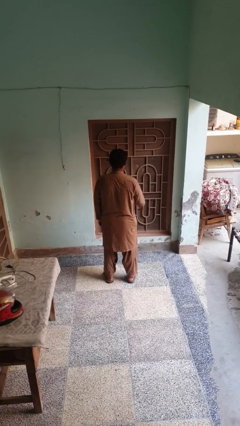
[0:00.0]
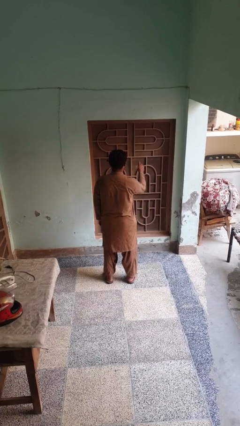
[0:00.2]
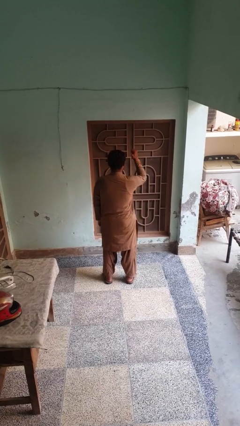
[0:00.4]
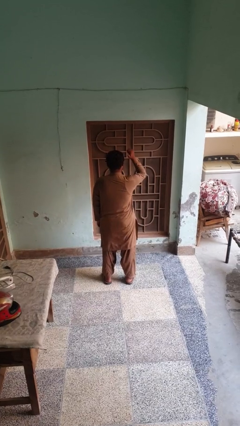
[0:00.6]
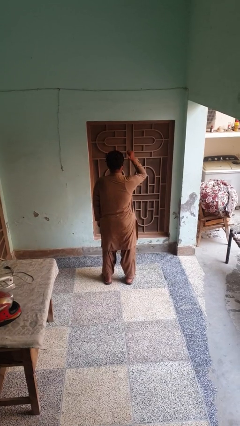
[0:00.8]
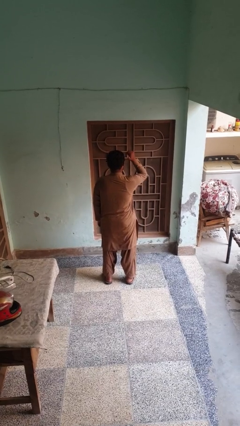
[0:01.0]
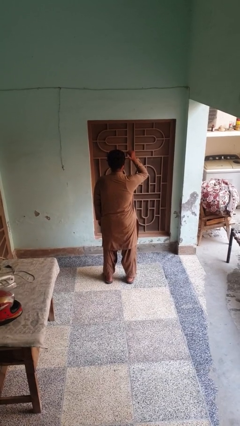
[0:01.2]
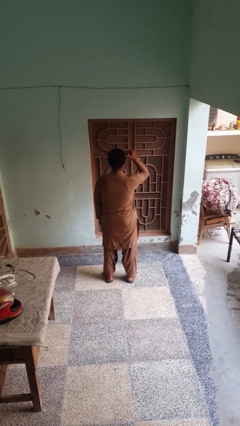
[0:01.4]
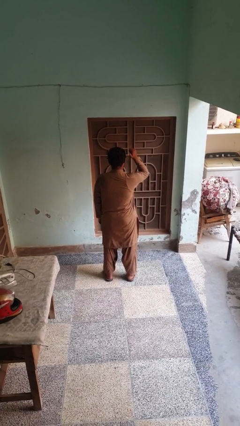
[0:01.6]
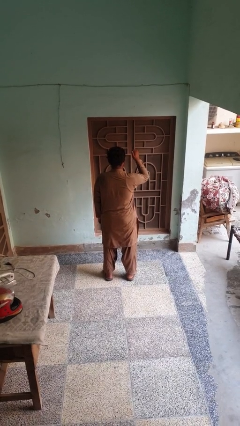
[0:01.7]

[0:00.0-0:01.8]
person gestures behind me

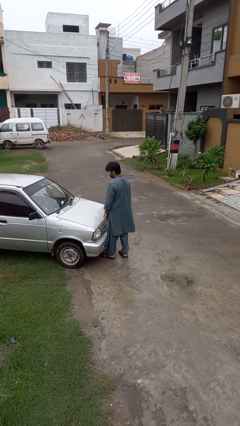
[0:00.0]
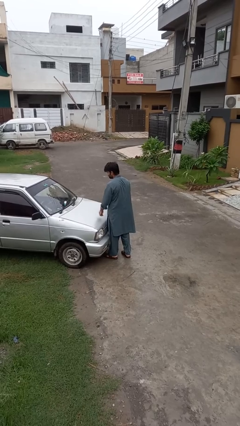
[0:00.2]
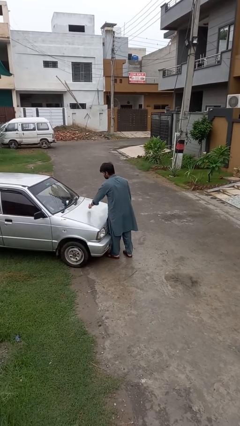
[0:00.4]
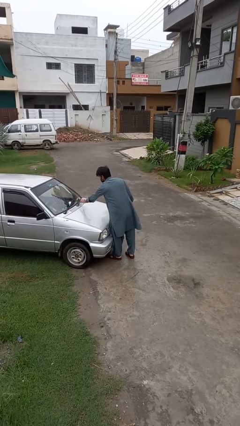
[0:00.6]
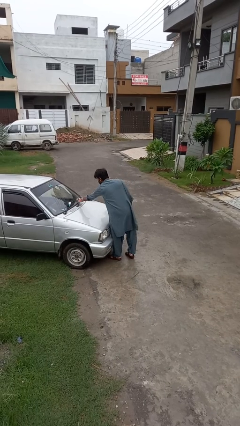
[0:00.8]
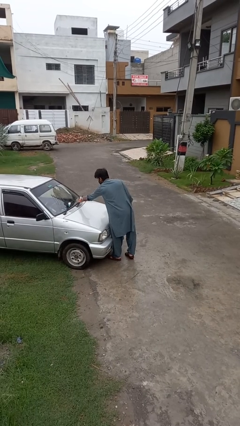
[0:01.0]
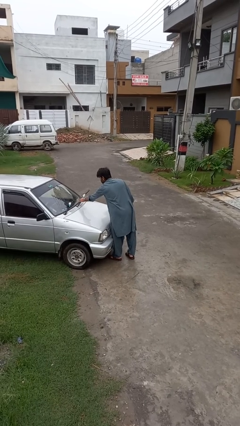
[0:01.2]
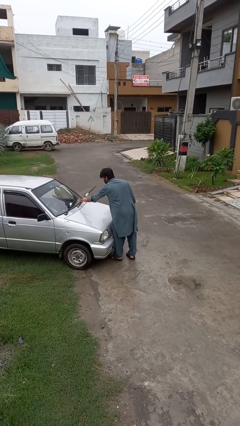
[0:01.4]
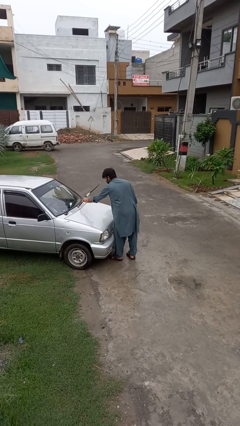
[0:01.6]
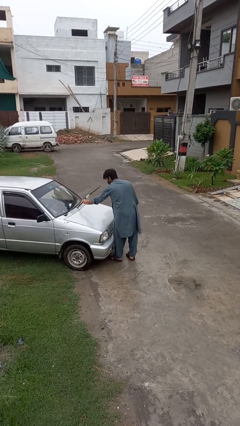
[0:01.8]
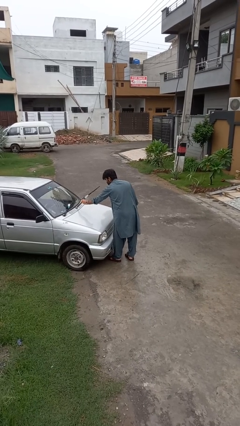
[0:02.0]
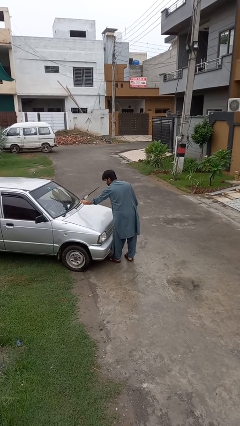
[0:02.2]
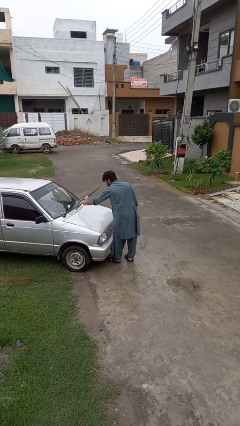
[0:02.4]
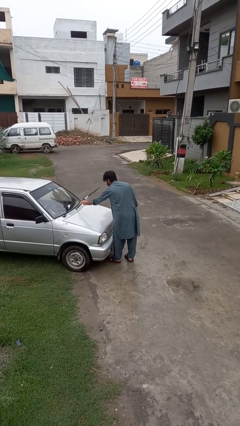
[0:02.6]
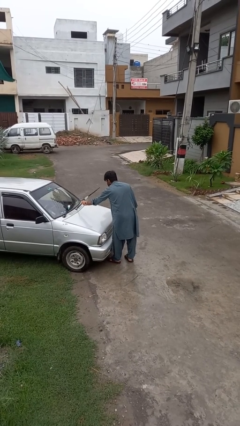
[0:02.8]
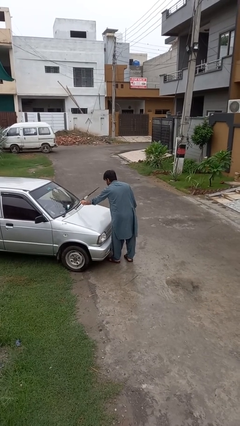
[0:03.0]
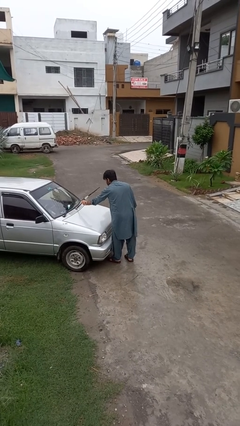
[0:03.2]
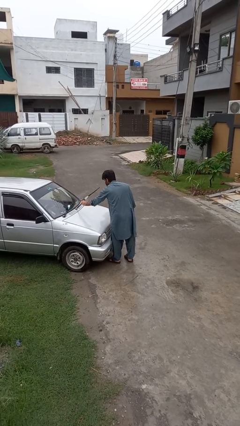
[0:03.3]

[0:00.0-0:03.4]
person flips up car wipers

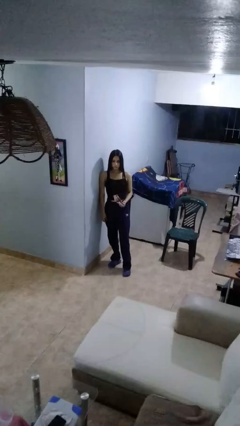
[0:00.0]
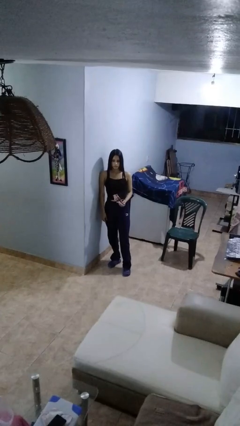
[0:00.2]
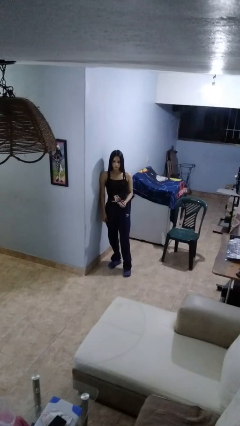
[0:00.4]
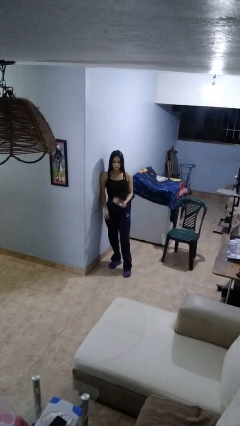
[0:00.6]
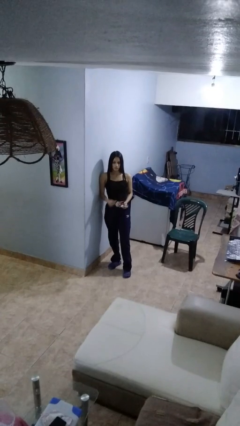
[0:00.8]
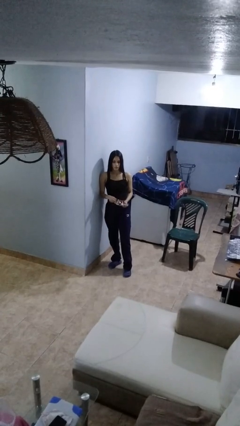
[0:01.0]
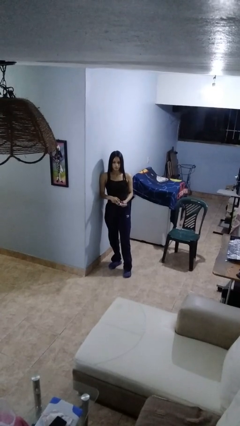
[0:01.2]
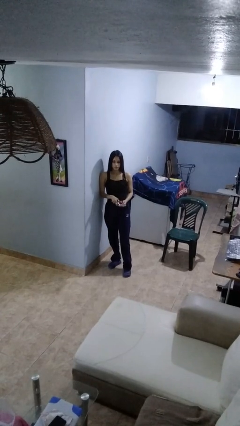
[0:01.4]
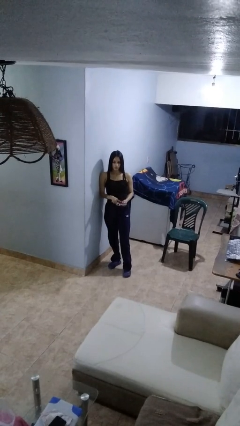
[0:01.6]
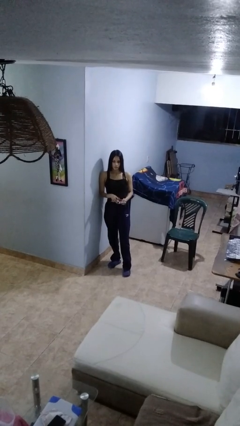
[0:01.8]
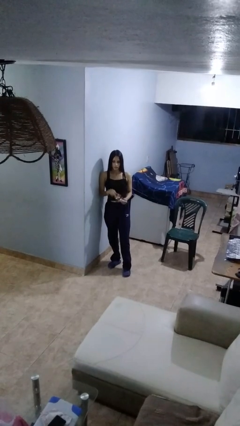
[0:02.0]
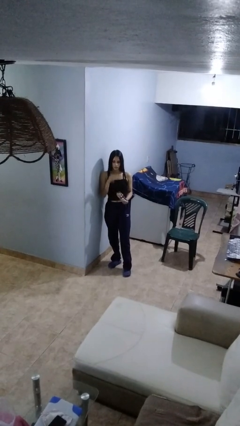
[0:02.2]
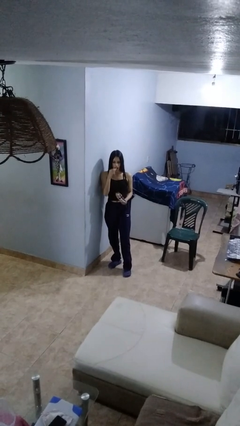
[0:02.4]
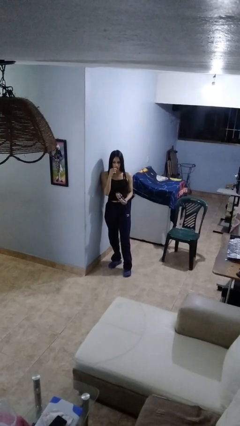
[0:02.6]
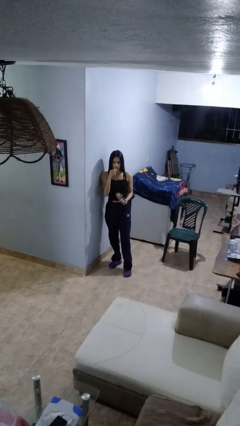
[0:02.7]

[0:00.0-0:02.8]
person eats snack from bag

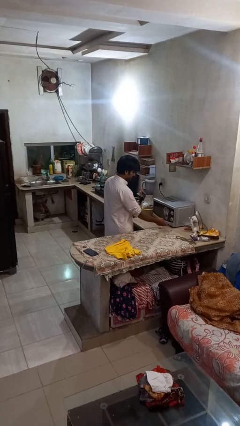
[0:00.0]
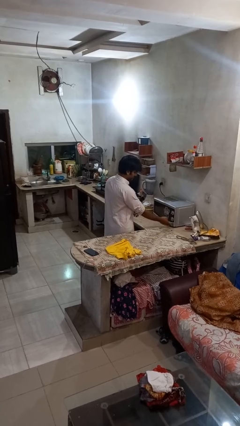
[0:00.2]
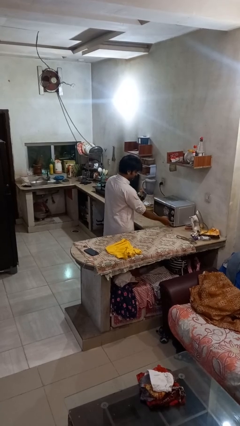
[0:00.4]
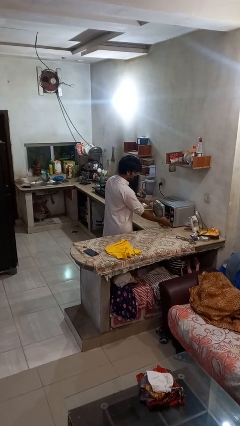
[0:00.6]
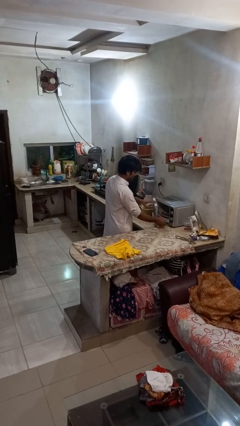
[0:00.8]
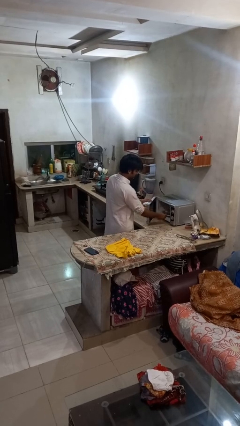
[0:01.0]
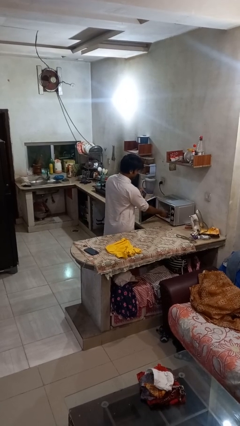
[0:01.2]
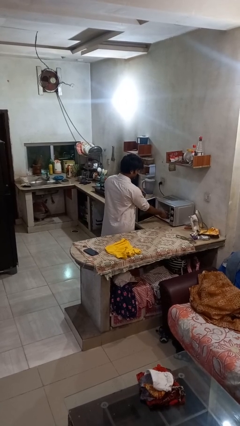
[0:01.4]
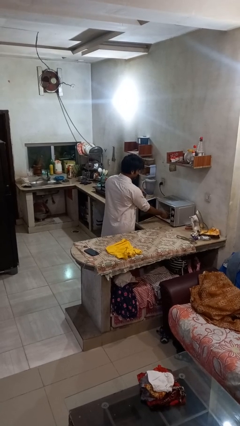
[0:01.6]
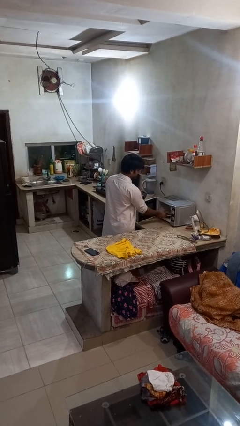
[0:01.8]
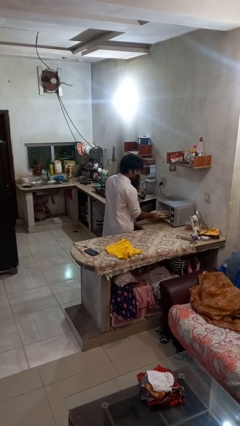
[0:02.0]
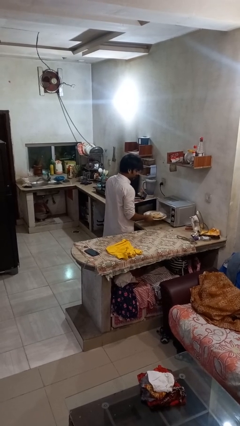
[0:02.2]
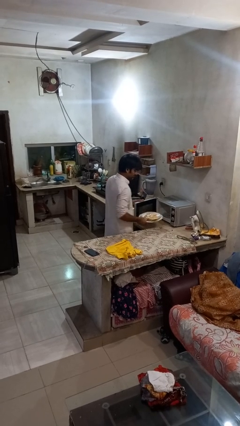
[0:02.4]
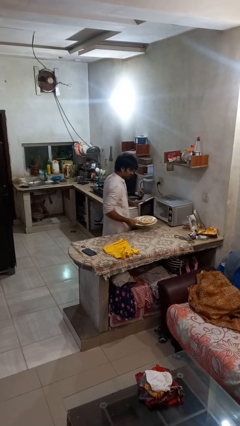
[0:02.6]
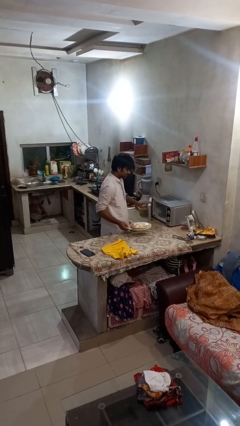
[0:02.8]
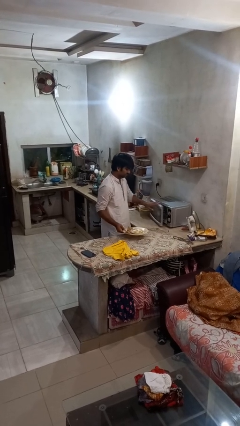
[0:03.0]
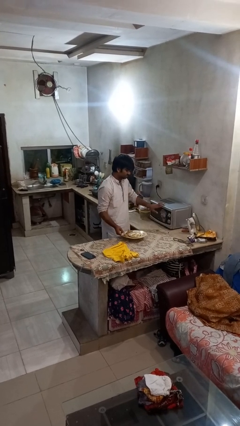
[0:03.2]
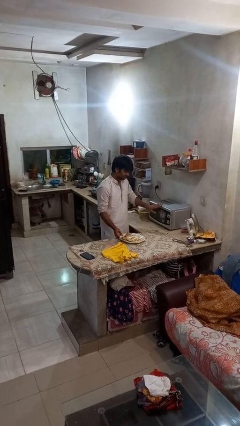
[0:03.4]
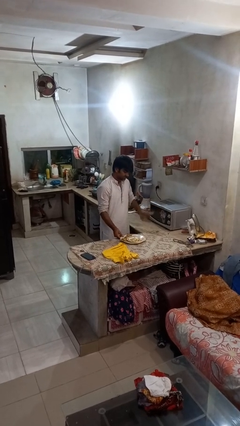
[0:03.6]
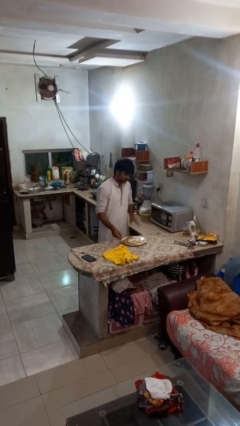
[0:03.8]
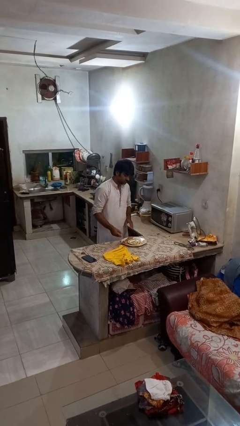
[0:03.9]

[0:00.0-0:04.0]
person takes object from microwave

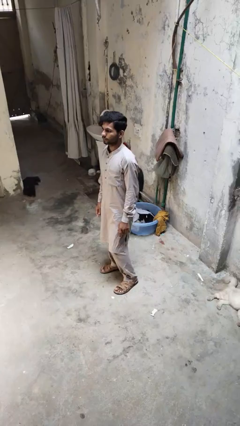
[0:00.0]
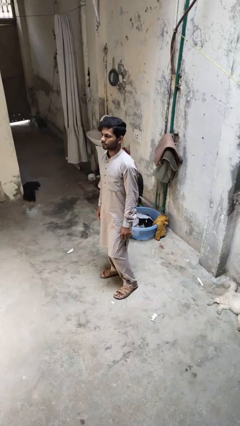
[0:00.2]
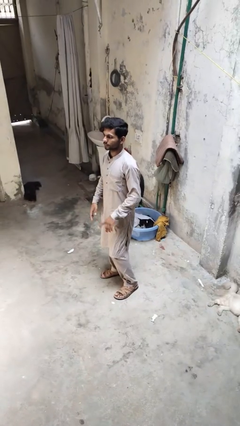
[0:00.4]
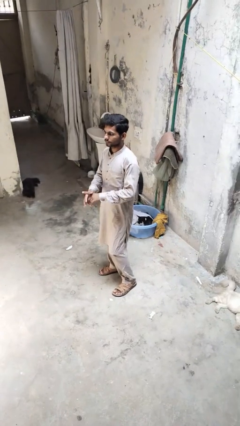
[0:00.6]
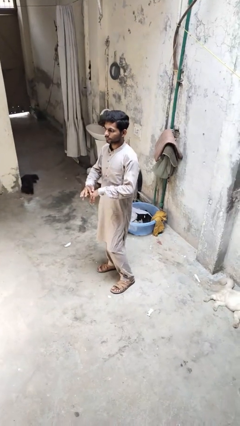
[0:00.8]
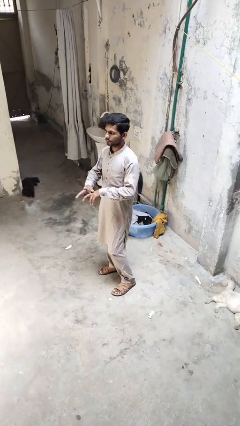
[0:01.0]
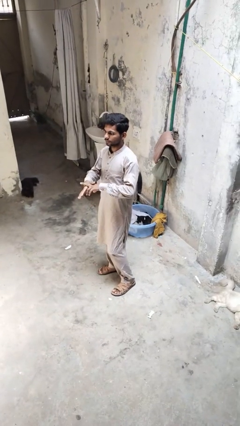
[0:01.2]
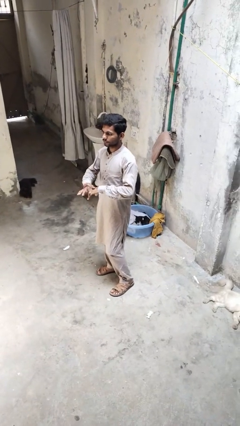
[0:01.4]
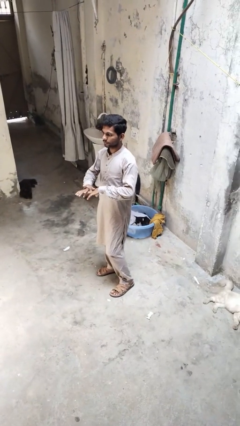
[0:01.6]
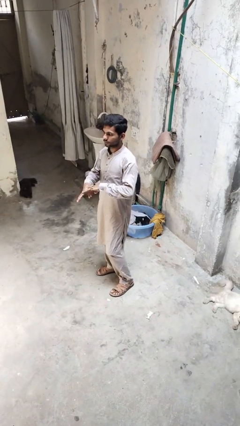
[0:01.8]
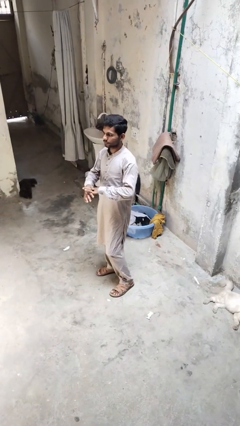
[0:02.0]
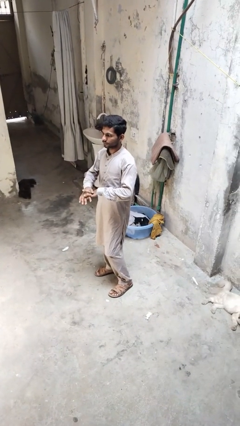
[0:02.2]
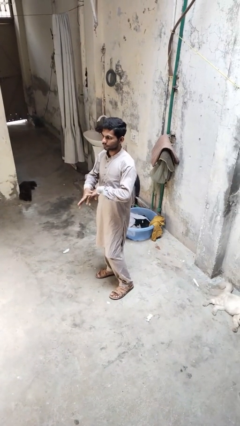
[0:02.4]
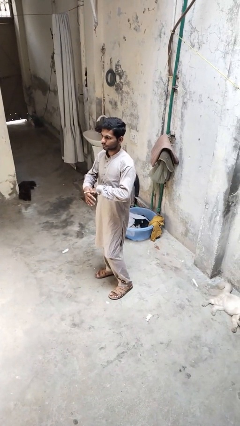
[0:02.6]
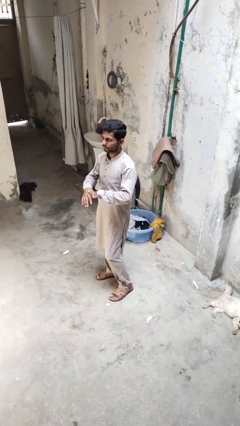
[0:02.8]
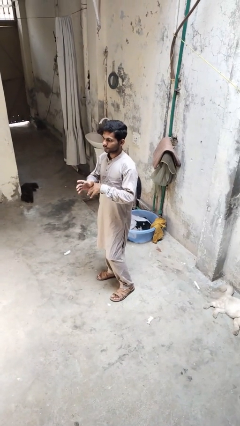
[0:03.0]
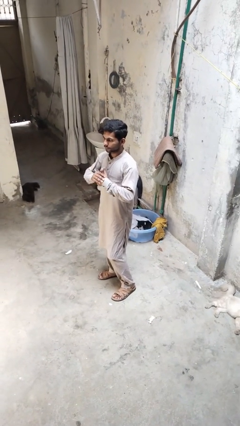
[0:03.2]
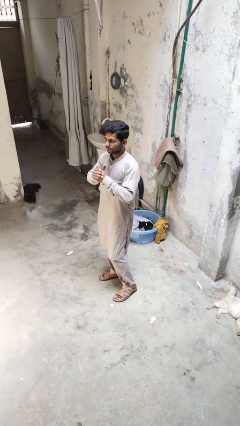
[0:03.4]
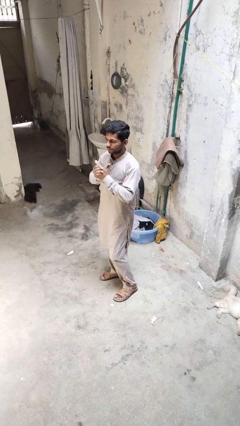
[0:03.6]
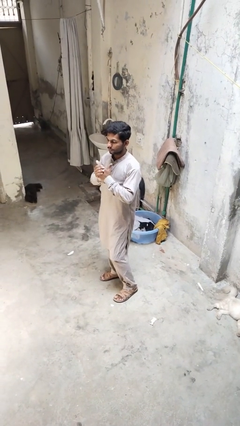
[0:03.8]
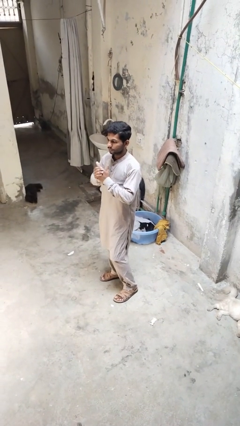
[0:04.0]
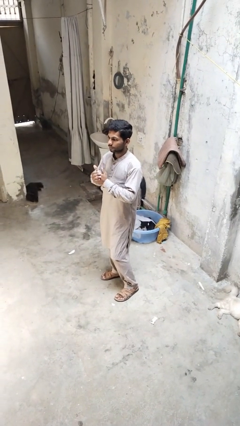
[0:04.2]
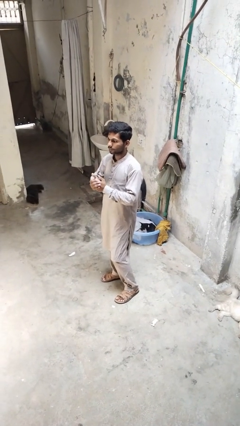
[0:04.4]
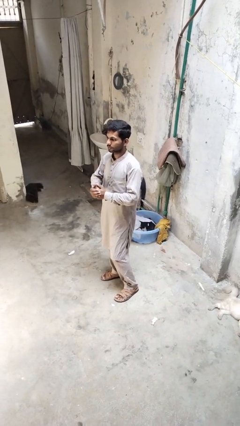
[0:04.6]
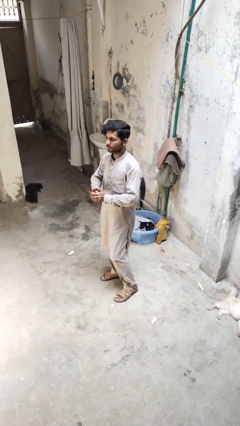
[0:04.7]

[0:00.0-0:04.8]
person cracks knuckles

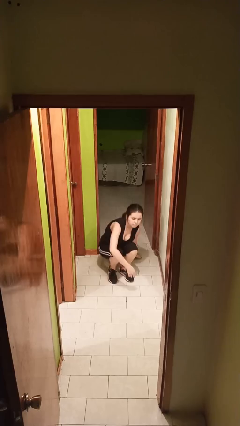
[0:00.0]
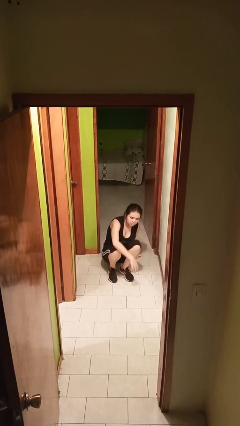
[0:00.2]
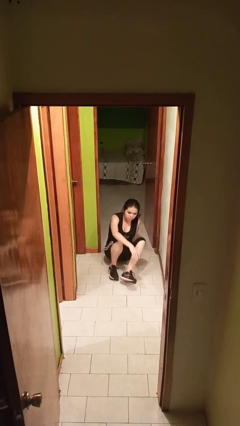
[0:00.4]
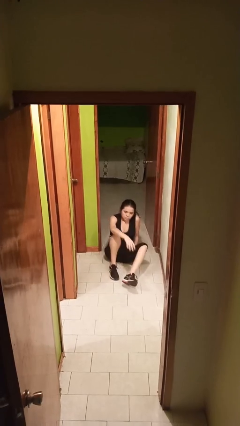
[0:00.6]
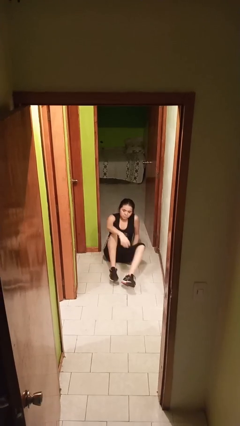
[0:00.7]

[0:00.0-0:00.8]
person sits down
